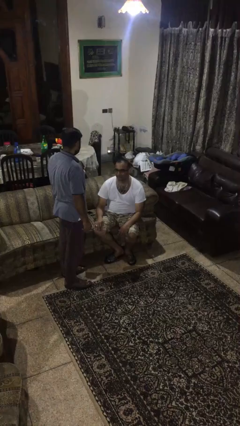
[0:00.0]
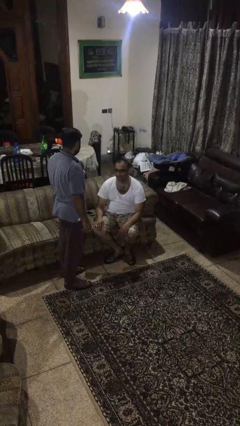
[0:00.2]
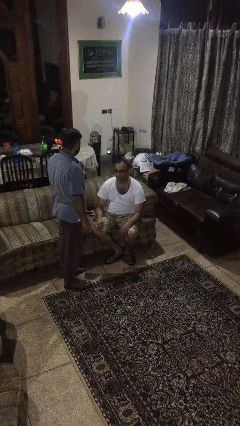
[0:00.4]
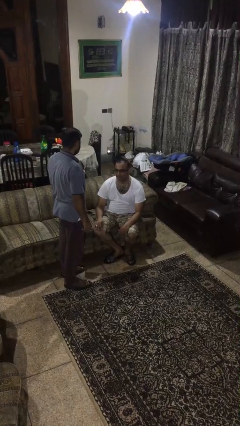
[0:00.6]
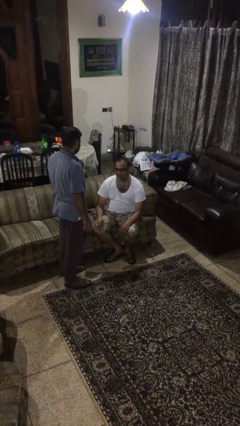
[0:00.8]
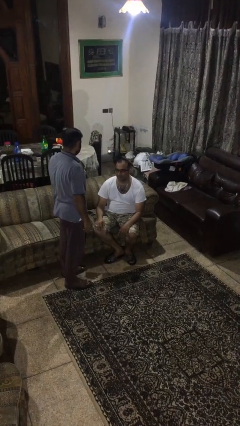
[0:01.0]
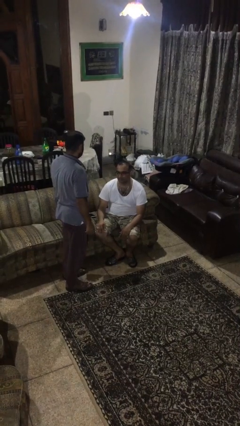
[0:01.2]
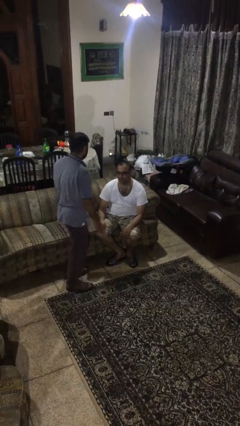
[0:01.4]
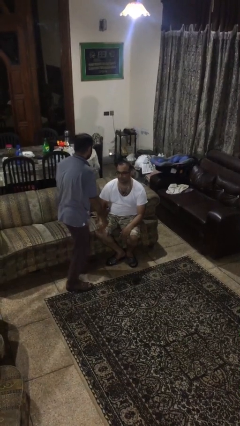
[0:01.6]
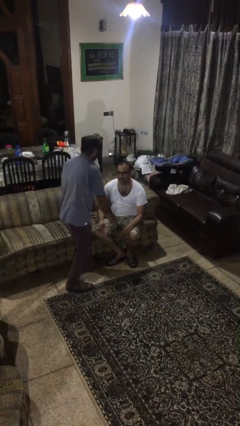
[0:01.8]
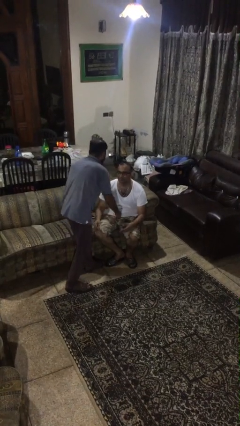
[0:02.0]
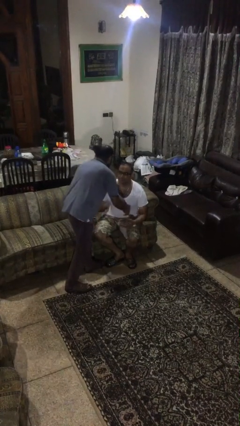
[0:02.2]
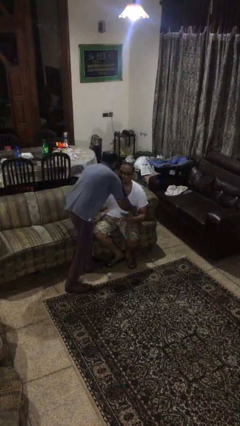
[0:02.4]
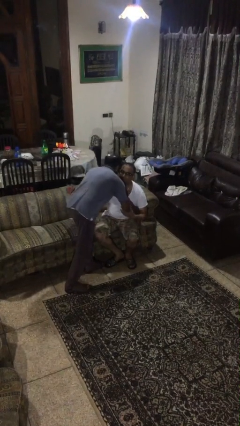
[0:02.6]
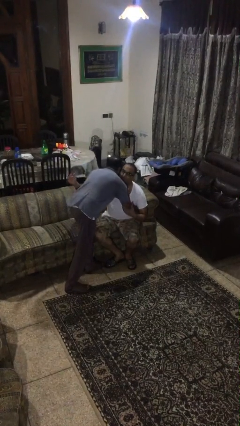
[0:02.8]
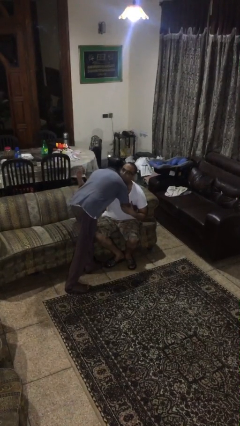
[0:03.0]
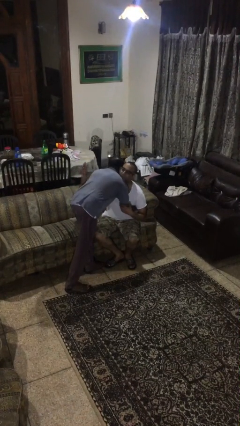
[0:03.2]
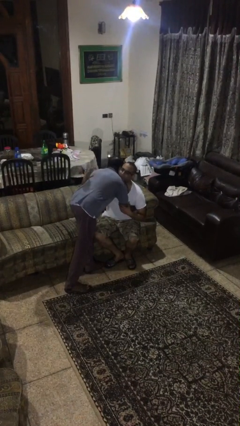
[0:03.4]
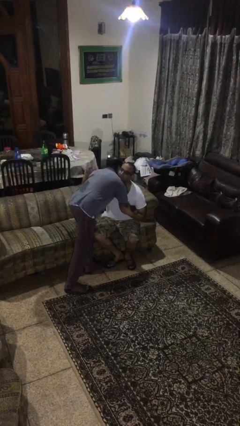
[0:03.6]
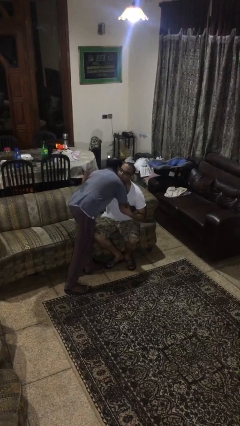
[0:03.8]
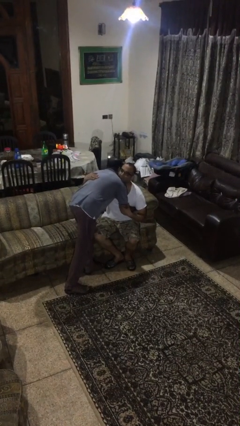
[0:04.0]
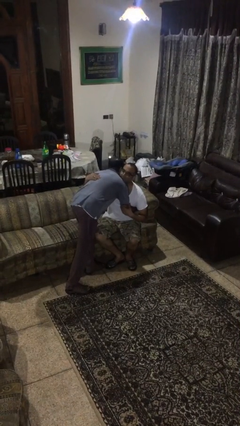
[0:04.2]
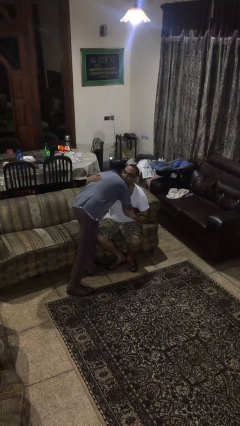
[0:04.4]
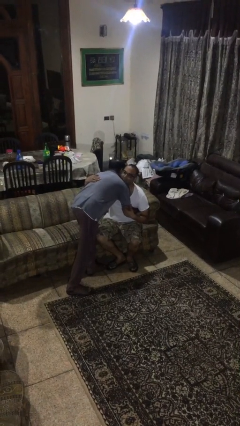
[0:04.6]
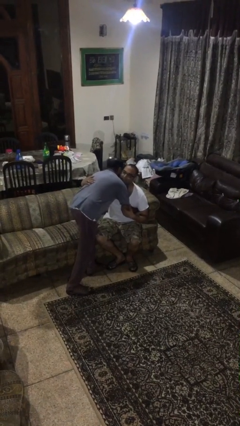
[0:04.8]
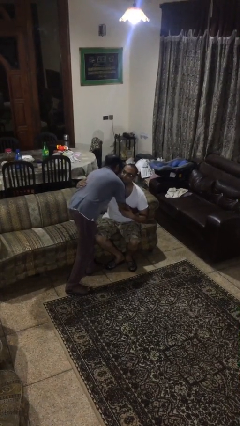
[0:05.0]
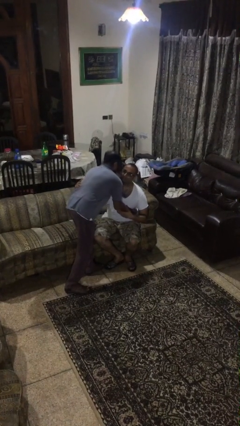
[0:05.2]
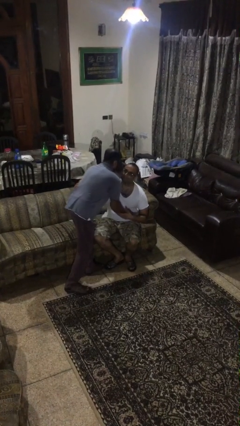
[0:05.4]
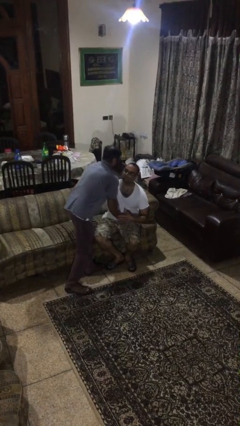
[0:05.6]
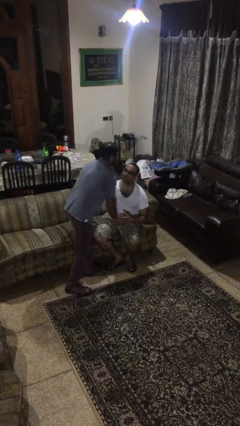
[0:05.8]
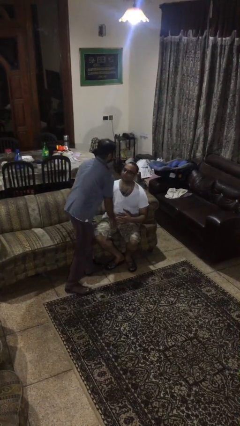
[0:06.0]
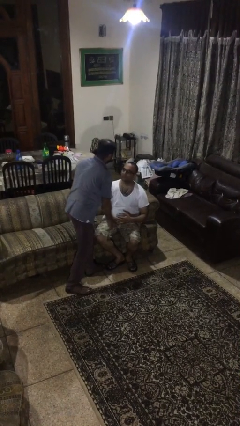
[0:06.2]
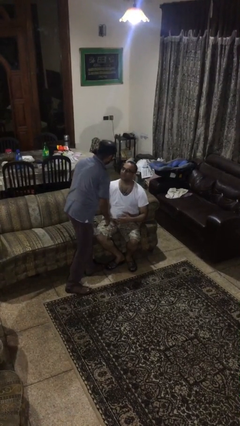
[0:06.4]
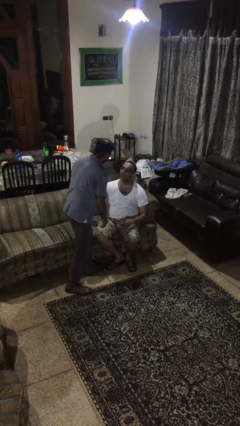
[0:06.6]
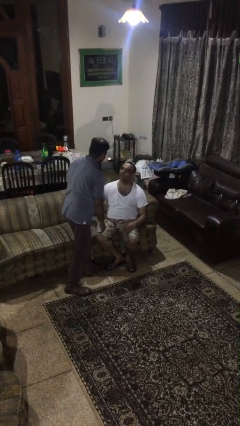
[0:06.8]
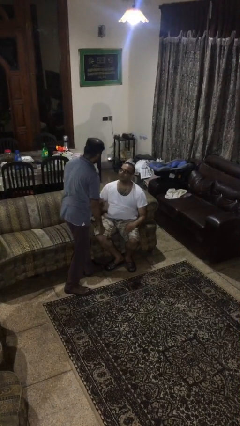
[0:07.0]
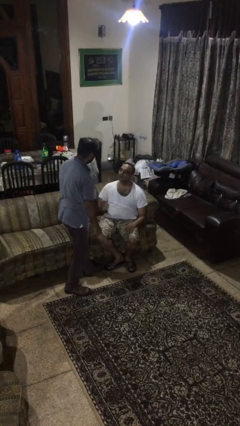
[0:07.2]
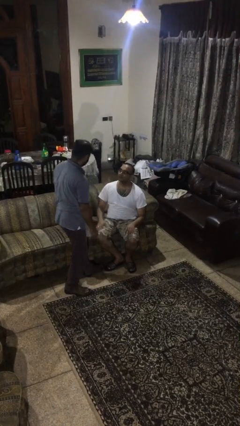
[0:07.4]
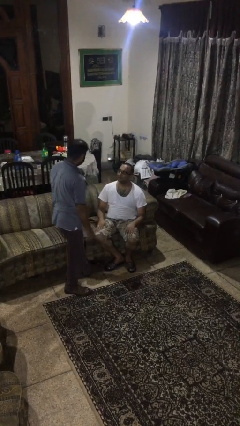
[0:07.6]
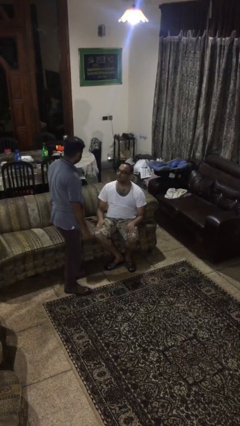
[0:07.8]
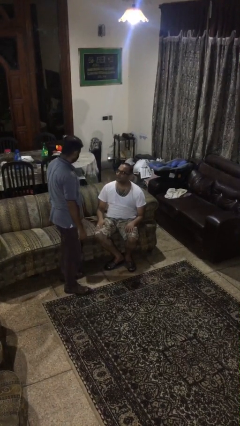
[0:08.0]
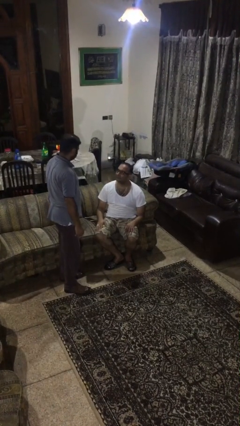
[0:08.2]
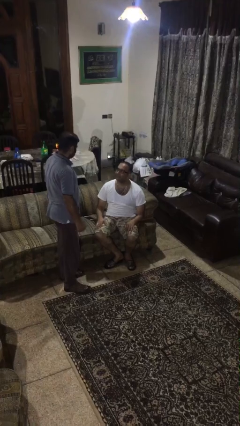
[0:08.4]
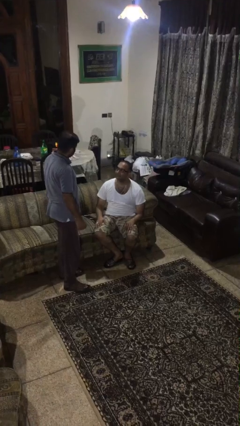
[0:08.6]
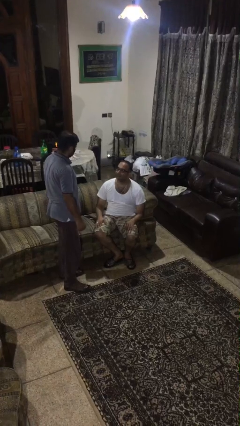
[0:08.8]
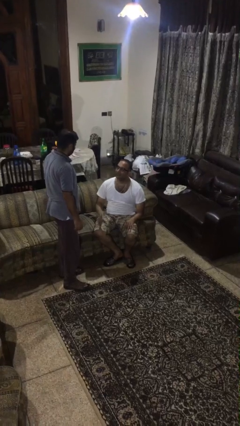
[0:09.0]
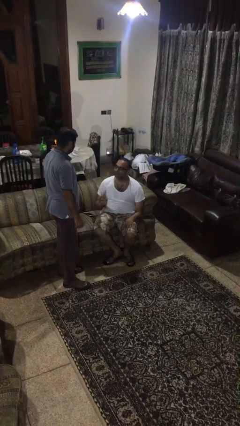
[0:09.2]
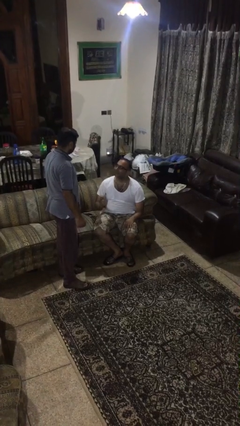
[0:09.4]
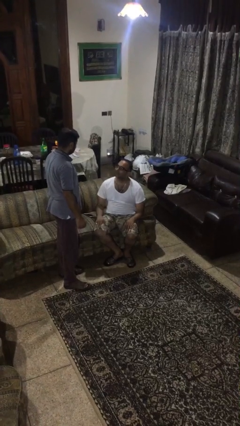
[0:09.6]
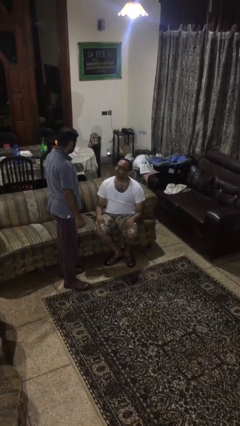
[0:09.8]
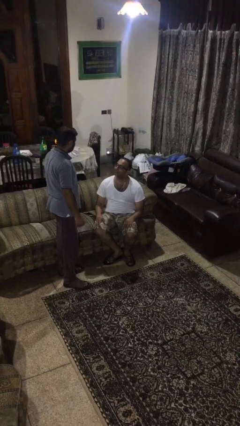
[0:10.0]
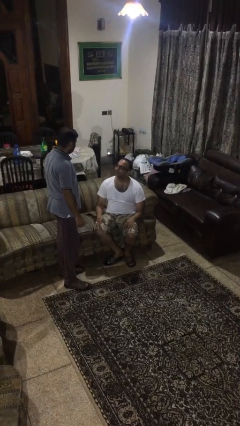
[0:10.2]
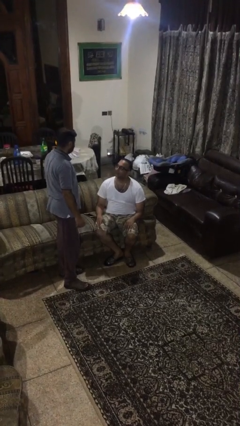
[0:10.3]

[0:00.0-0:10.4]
person embraces person

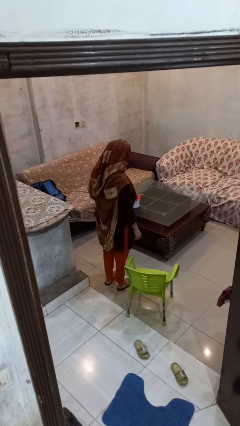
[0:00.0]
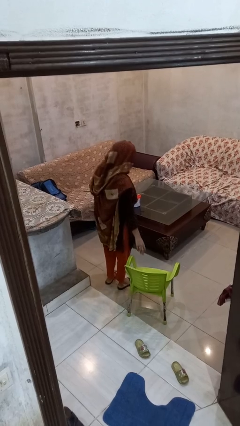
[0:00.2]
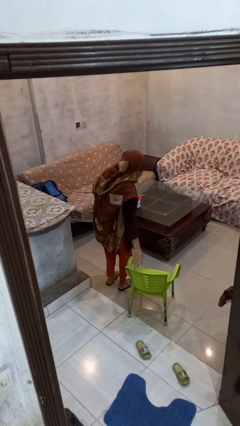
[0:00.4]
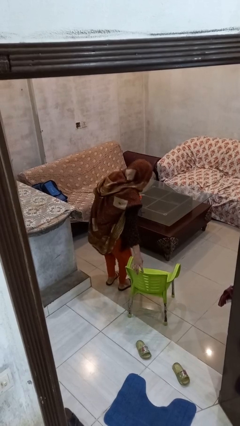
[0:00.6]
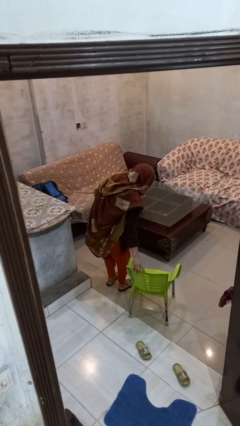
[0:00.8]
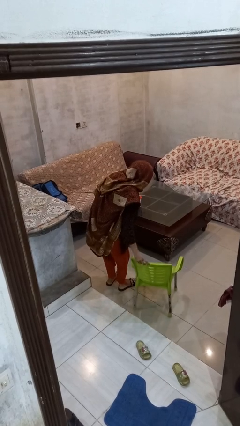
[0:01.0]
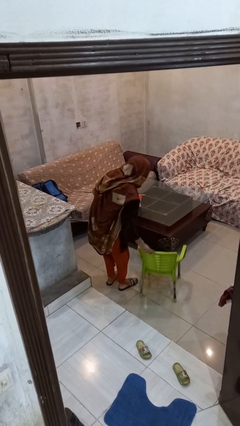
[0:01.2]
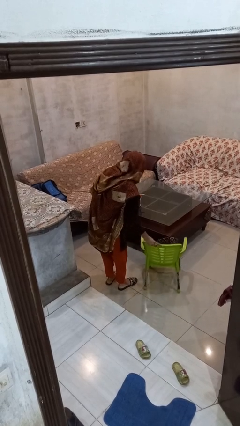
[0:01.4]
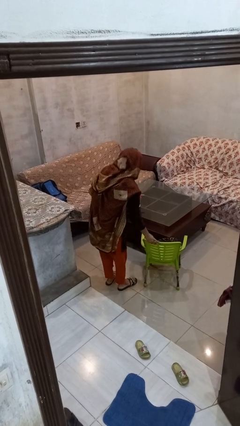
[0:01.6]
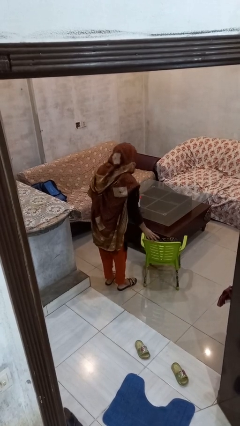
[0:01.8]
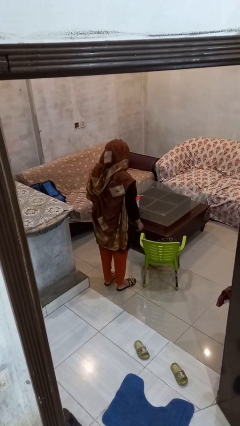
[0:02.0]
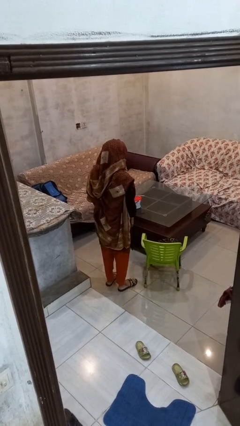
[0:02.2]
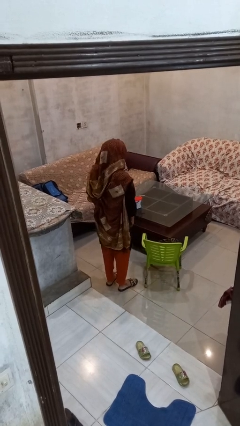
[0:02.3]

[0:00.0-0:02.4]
person pushes in chair

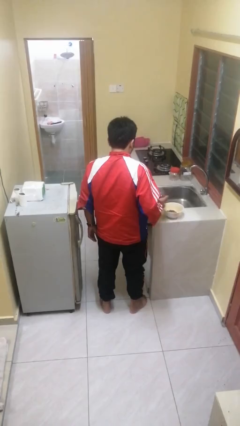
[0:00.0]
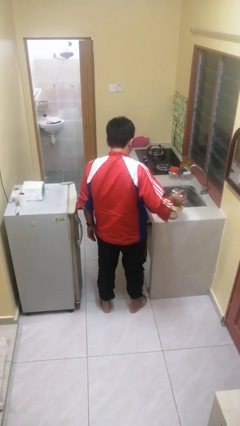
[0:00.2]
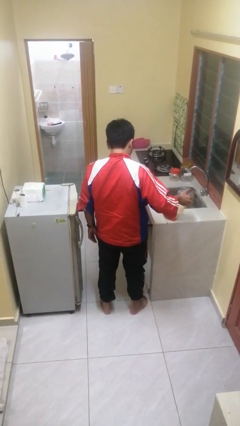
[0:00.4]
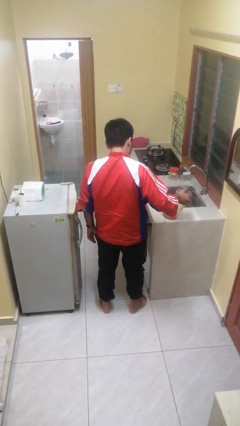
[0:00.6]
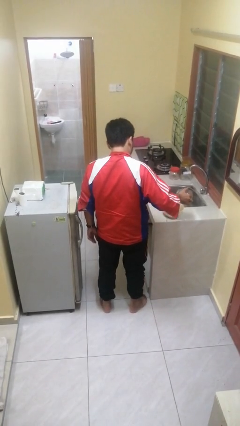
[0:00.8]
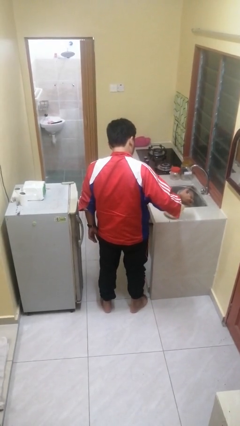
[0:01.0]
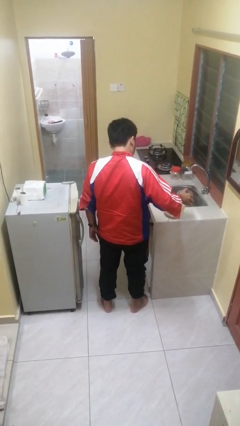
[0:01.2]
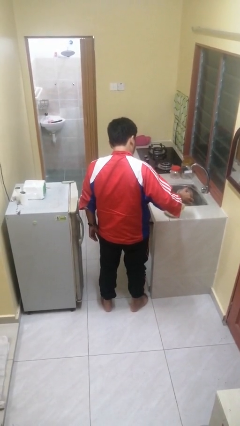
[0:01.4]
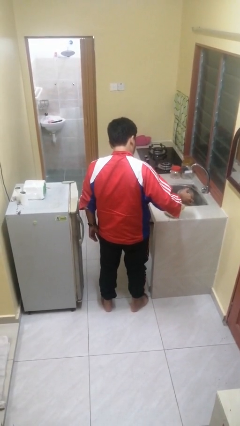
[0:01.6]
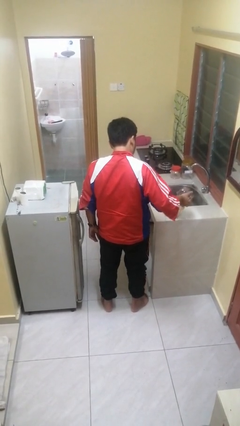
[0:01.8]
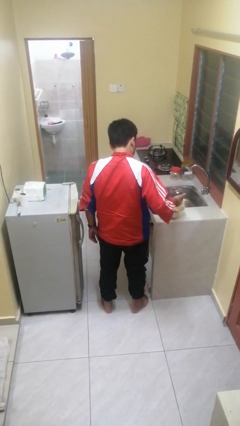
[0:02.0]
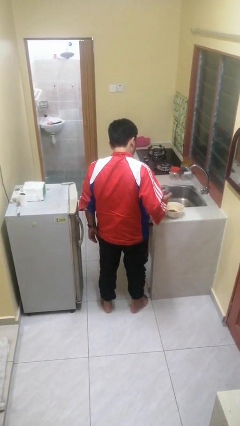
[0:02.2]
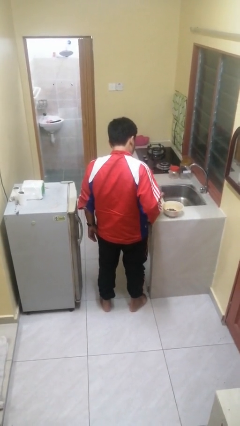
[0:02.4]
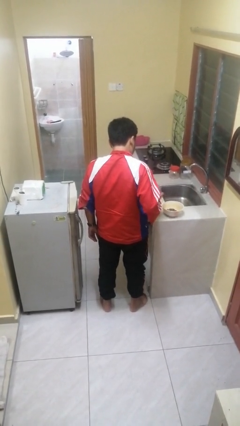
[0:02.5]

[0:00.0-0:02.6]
person pours into bowl

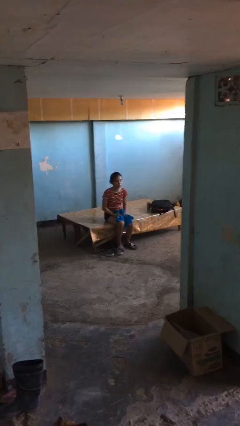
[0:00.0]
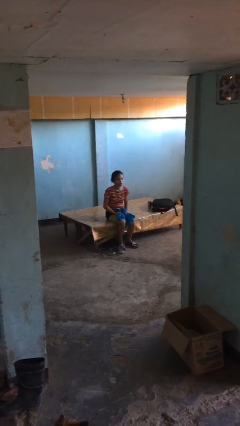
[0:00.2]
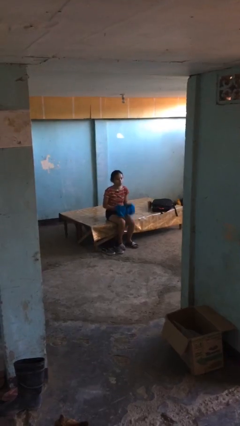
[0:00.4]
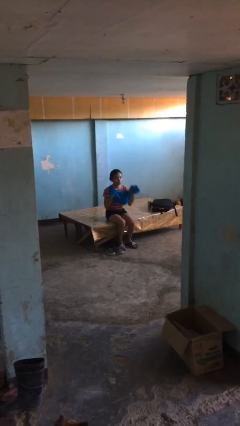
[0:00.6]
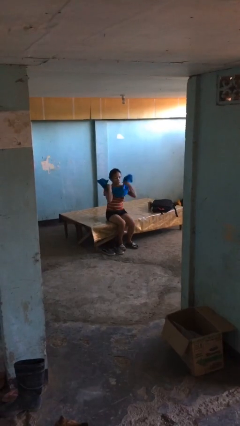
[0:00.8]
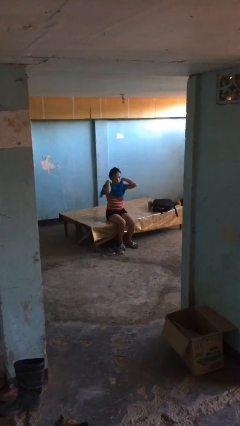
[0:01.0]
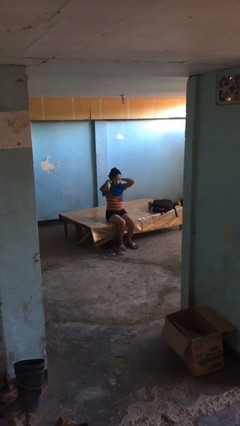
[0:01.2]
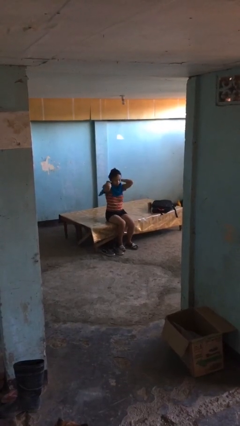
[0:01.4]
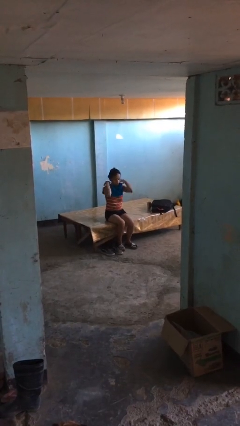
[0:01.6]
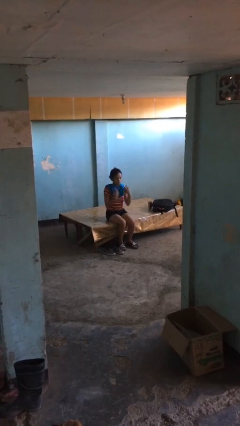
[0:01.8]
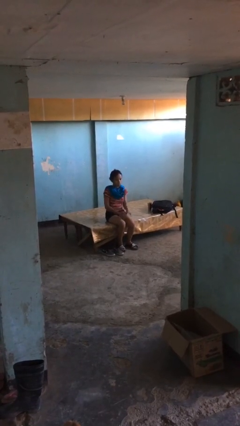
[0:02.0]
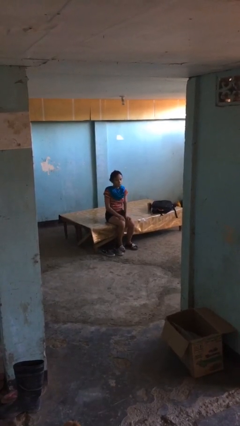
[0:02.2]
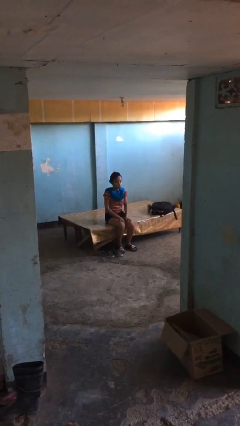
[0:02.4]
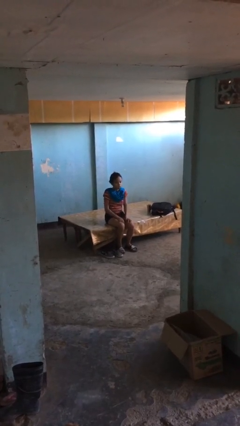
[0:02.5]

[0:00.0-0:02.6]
person puts on scarf
